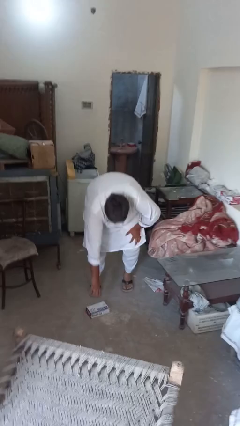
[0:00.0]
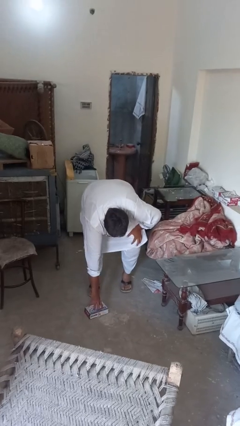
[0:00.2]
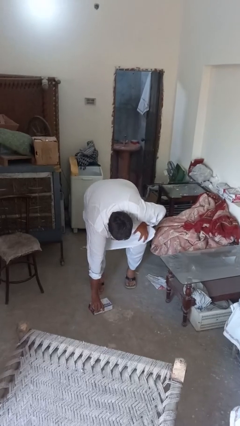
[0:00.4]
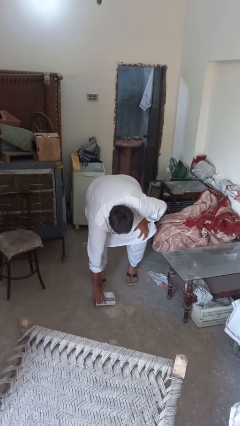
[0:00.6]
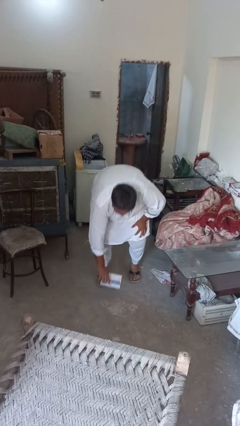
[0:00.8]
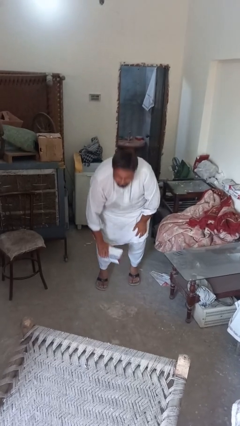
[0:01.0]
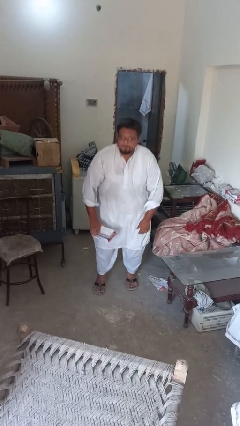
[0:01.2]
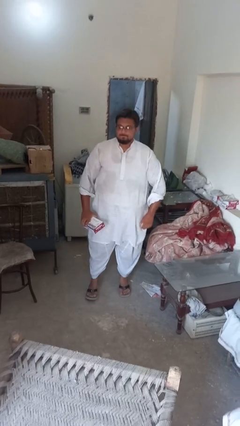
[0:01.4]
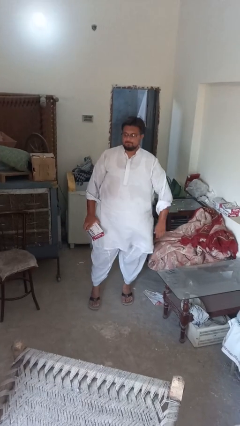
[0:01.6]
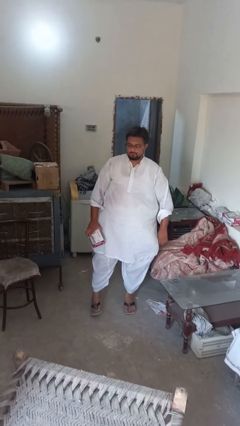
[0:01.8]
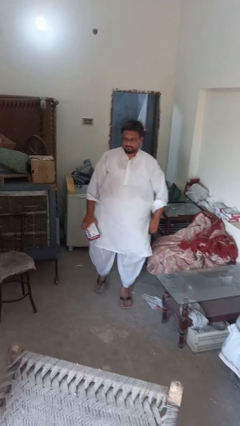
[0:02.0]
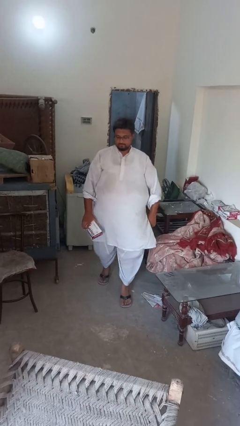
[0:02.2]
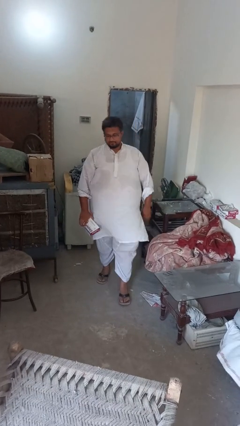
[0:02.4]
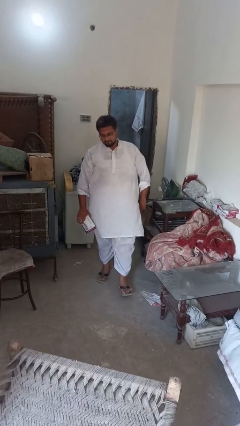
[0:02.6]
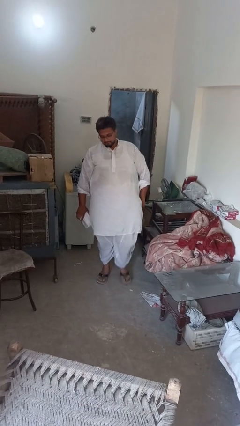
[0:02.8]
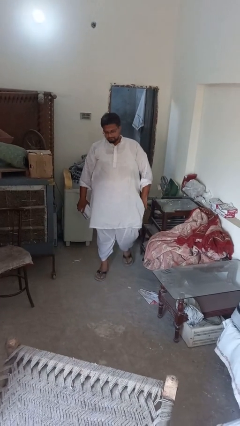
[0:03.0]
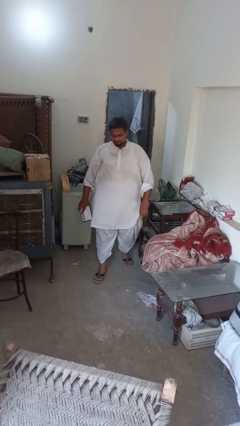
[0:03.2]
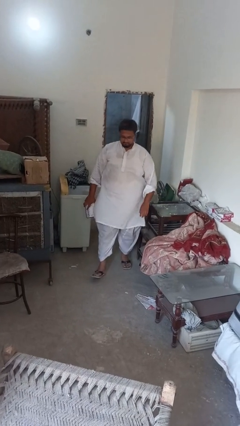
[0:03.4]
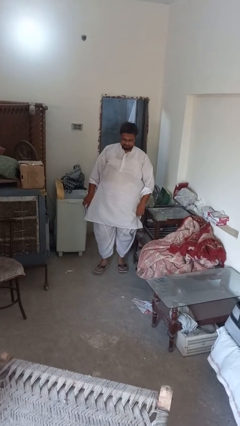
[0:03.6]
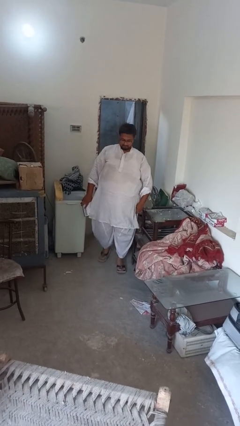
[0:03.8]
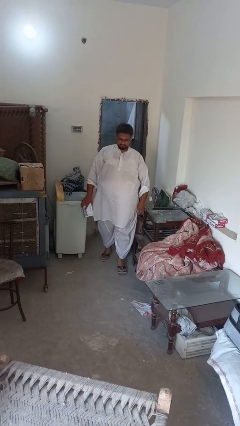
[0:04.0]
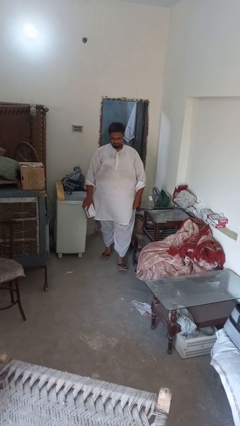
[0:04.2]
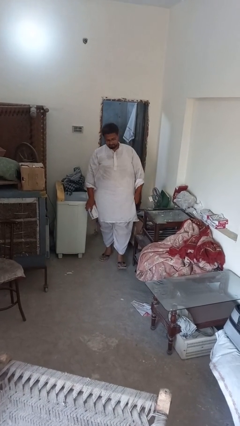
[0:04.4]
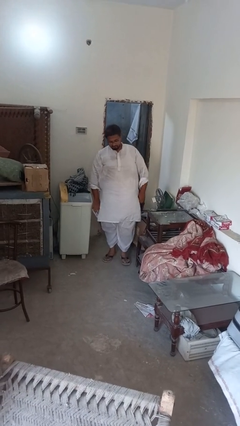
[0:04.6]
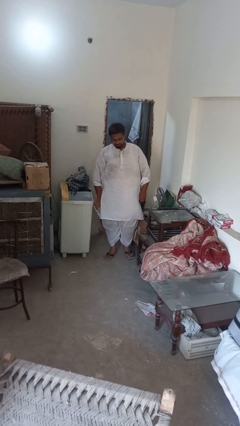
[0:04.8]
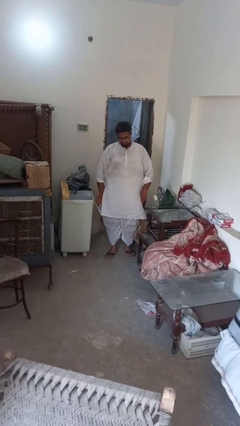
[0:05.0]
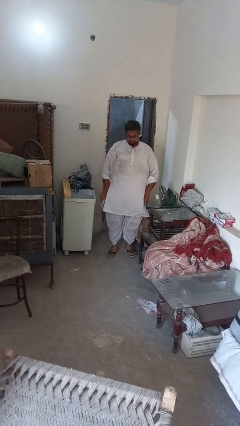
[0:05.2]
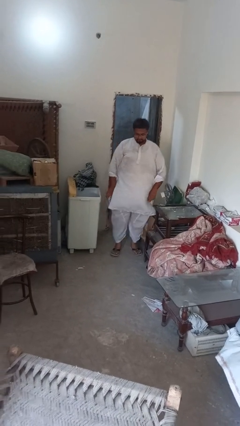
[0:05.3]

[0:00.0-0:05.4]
person picks up object from floor

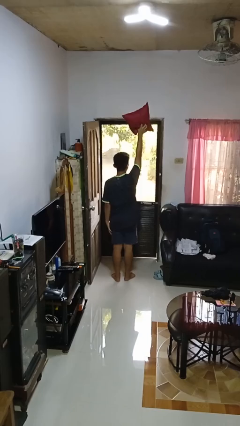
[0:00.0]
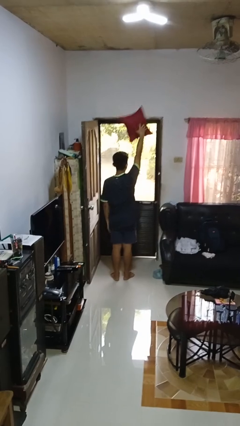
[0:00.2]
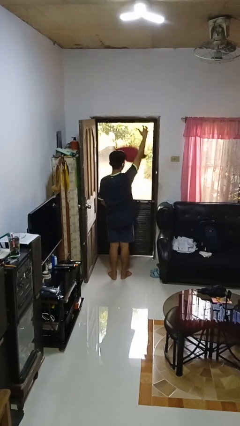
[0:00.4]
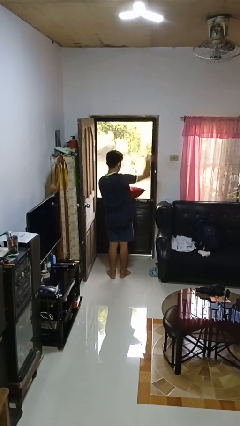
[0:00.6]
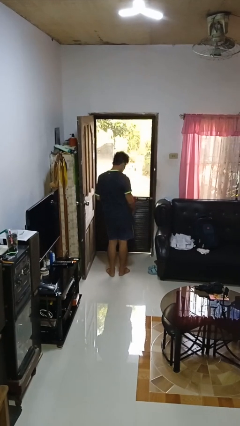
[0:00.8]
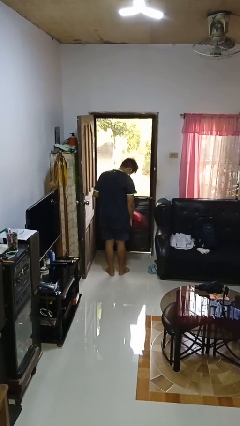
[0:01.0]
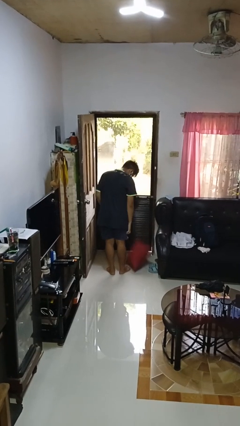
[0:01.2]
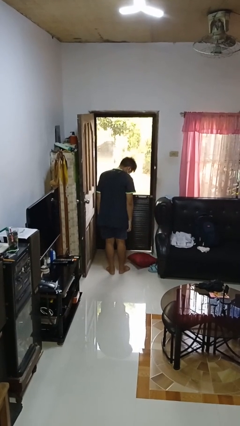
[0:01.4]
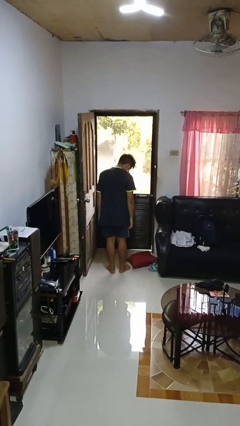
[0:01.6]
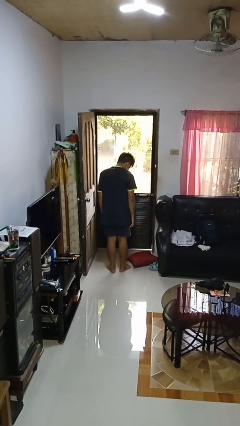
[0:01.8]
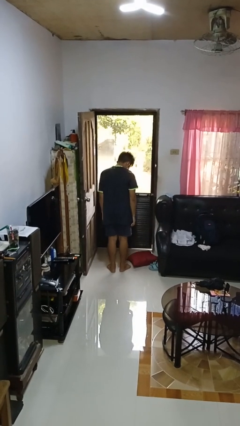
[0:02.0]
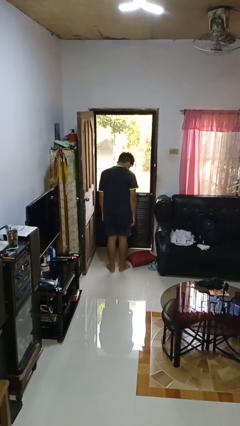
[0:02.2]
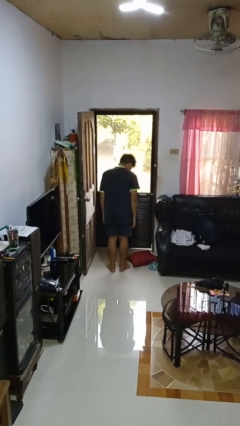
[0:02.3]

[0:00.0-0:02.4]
person drops object

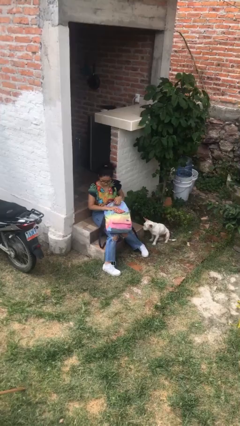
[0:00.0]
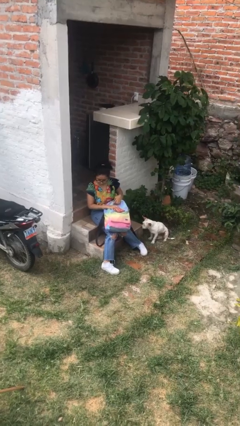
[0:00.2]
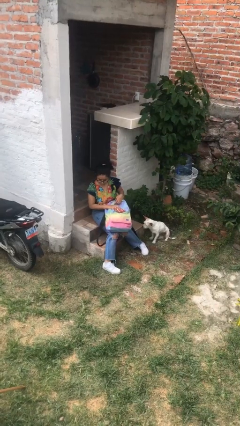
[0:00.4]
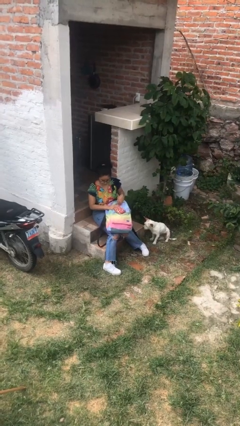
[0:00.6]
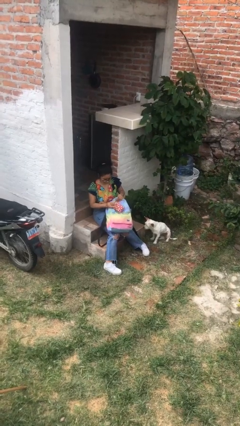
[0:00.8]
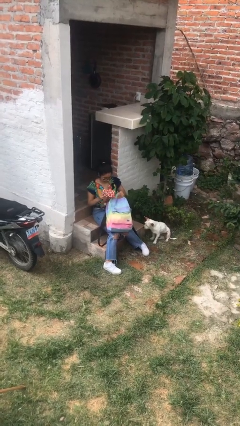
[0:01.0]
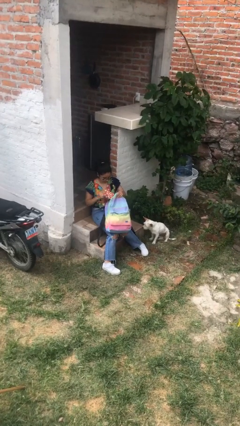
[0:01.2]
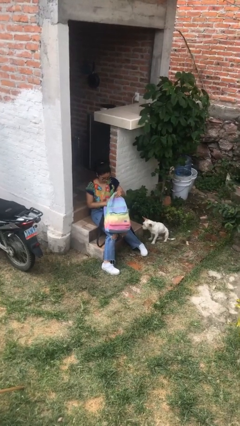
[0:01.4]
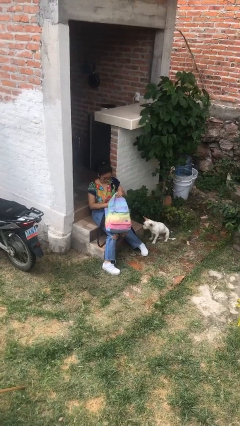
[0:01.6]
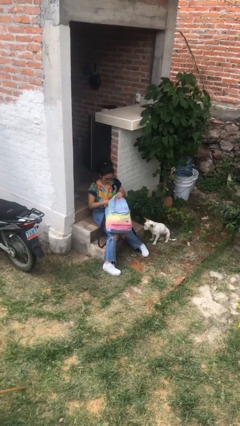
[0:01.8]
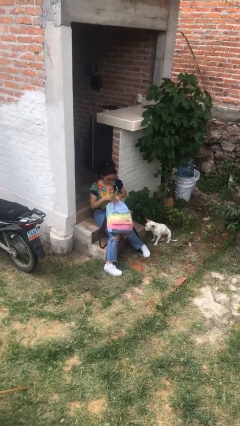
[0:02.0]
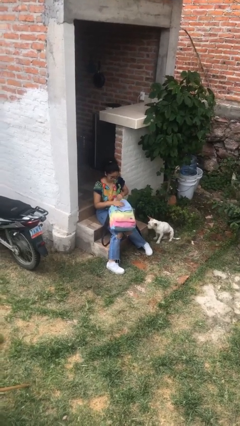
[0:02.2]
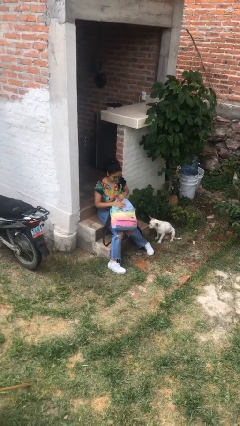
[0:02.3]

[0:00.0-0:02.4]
person puts object into backpack

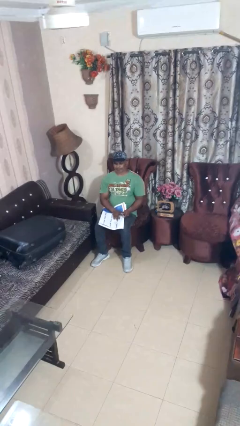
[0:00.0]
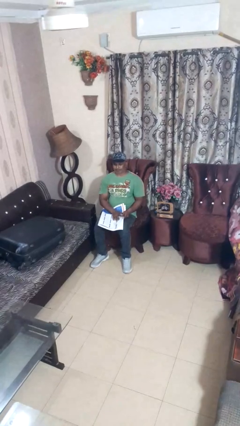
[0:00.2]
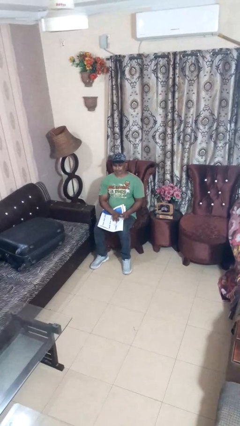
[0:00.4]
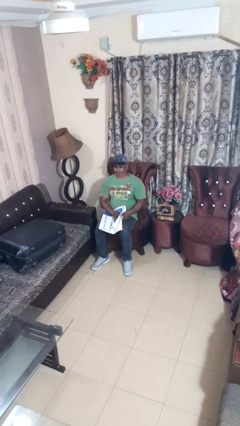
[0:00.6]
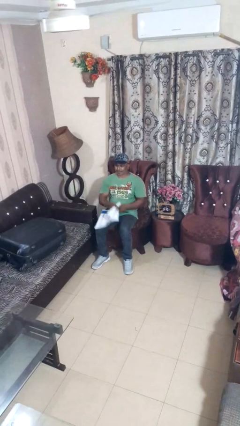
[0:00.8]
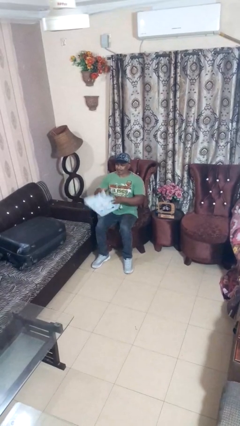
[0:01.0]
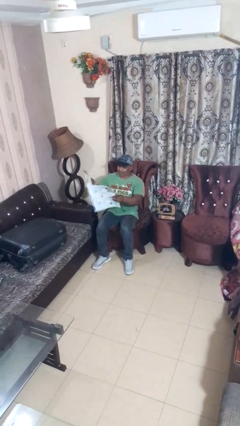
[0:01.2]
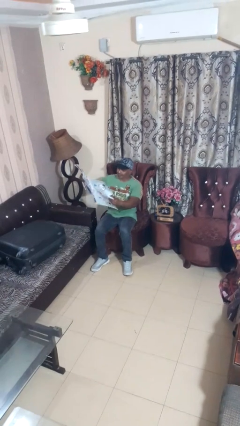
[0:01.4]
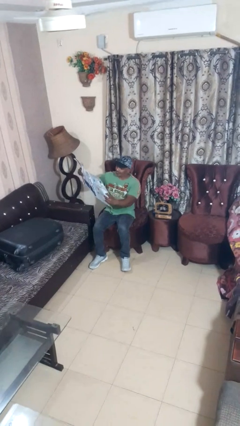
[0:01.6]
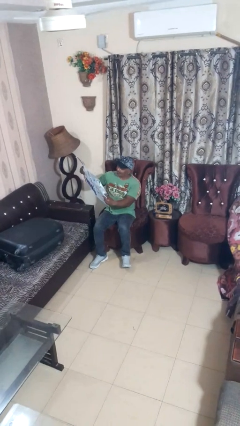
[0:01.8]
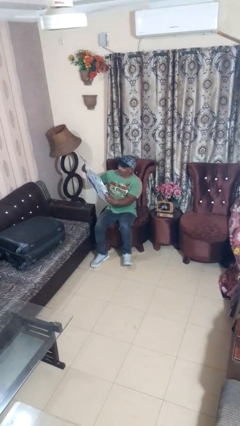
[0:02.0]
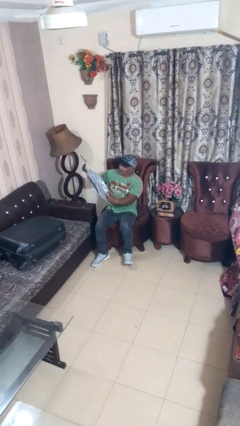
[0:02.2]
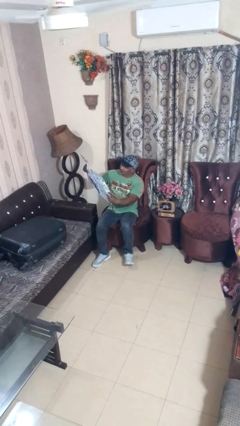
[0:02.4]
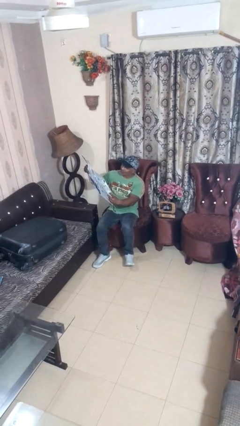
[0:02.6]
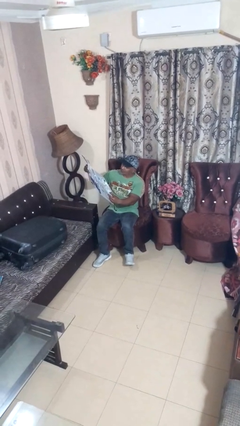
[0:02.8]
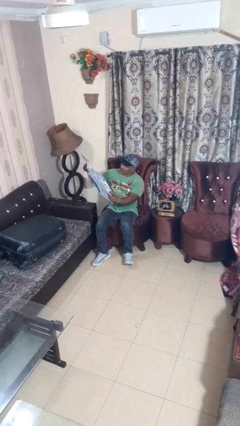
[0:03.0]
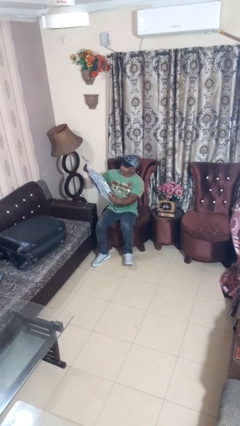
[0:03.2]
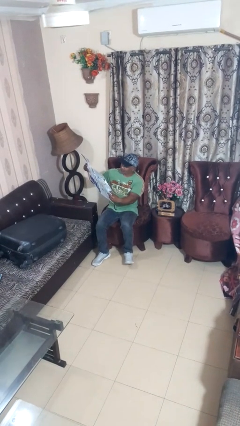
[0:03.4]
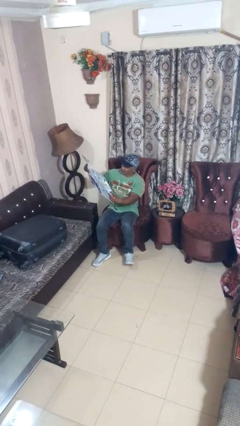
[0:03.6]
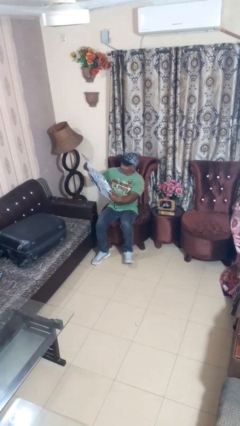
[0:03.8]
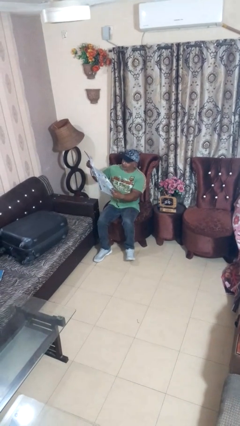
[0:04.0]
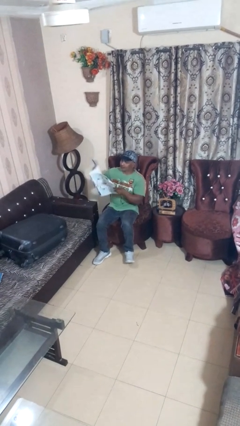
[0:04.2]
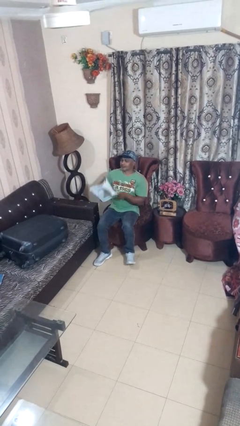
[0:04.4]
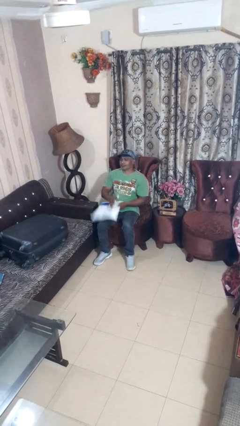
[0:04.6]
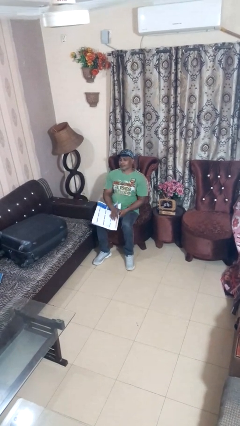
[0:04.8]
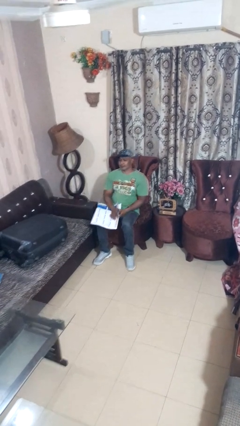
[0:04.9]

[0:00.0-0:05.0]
person reads newspaper

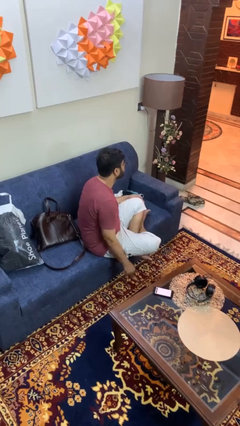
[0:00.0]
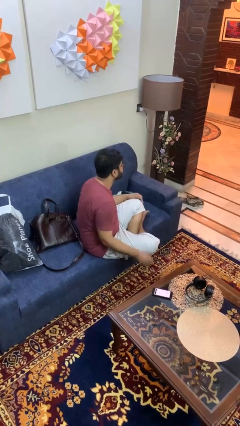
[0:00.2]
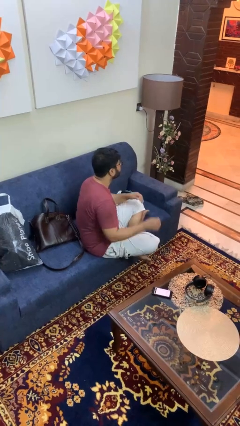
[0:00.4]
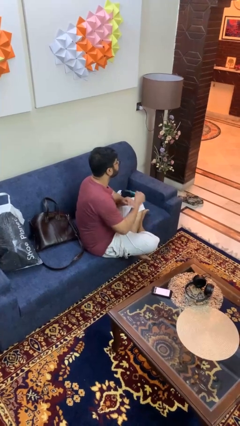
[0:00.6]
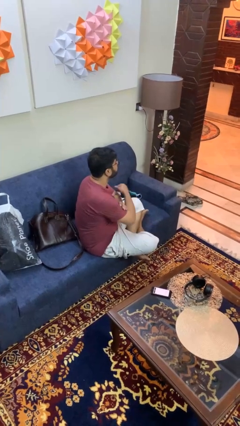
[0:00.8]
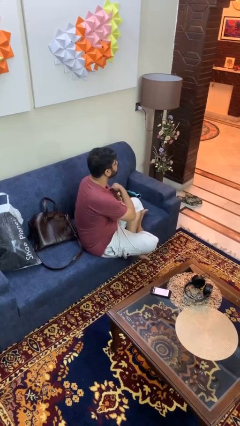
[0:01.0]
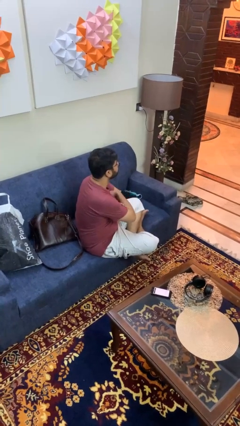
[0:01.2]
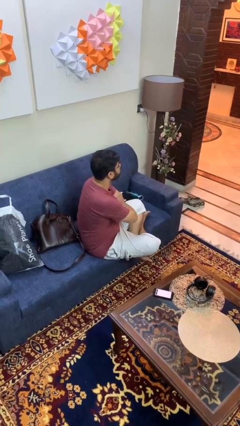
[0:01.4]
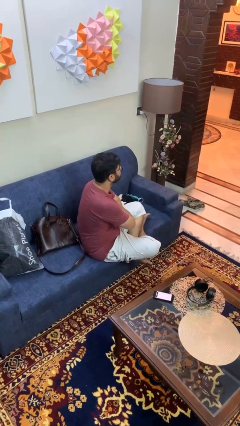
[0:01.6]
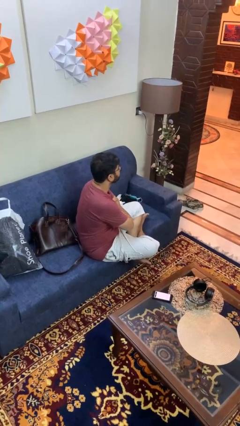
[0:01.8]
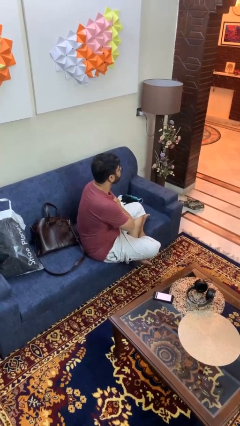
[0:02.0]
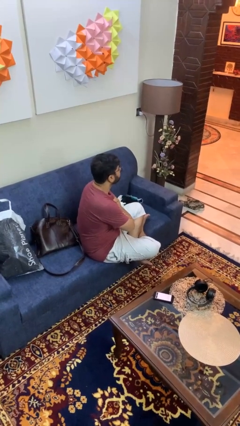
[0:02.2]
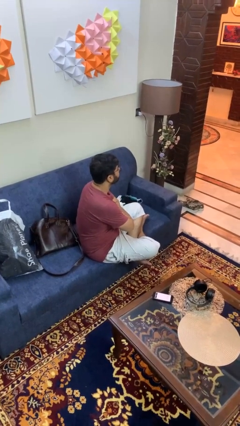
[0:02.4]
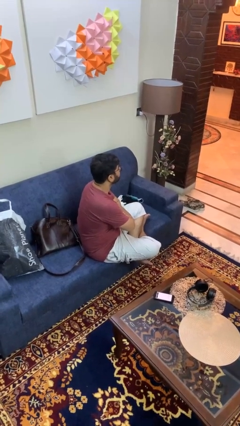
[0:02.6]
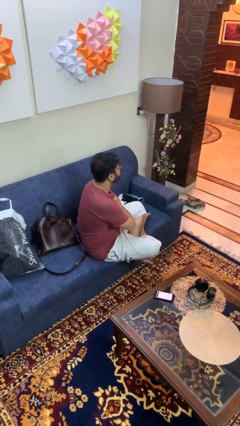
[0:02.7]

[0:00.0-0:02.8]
person crosses arms
